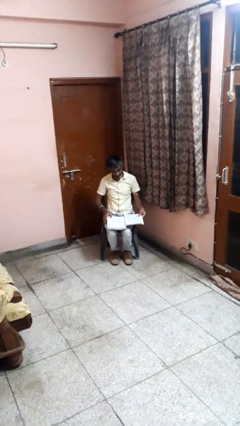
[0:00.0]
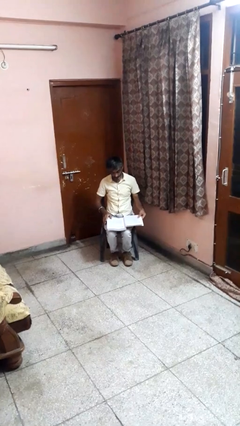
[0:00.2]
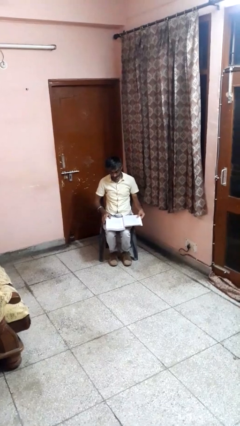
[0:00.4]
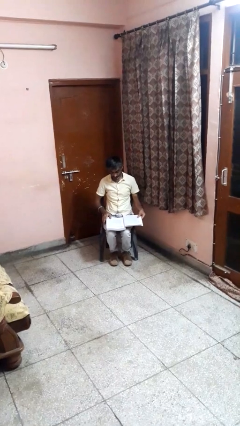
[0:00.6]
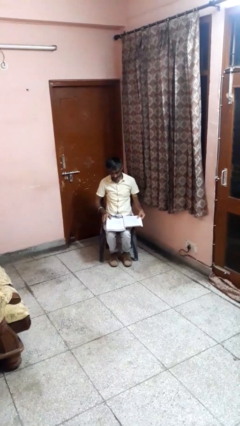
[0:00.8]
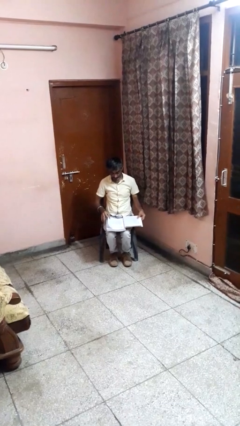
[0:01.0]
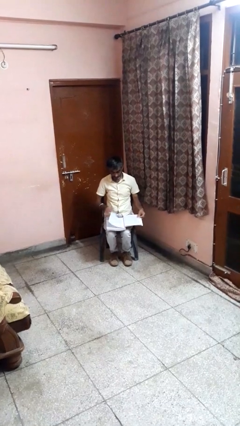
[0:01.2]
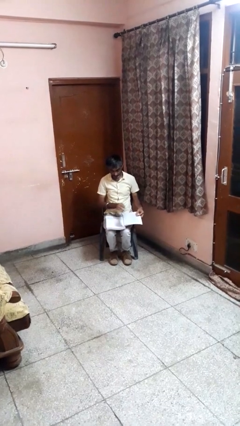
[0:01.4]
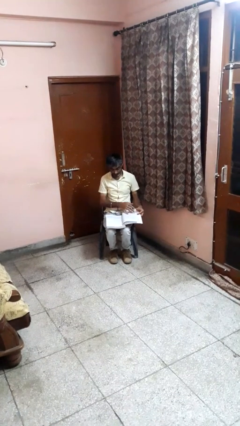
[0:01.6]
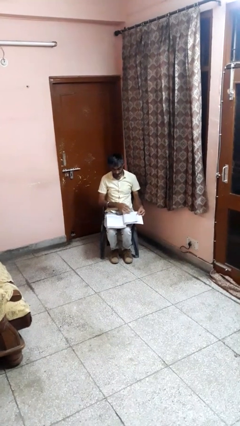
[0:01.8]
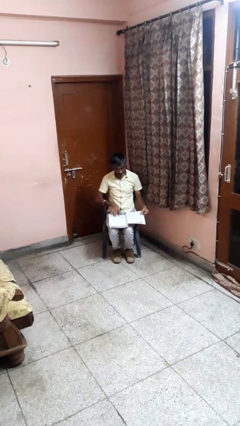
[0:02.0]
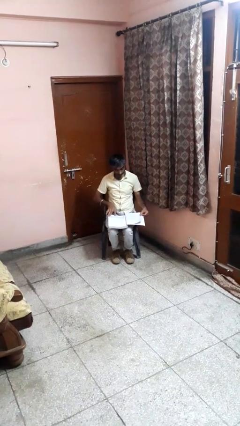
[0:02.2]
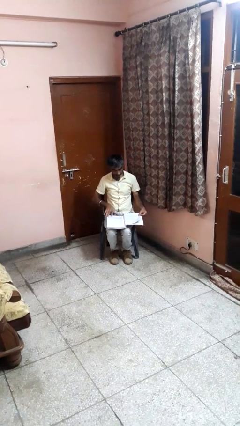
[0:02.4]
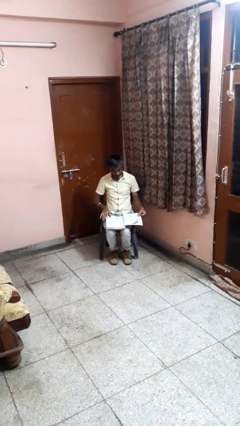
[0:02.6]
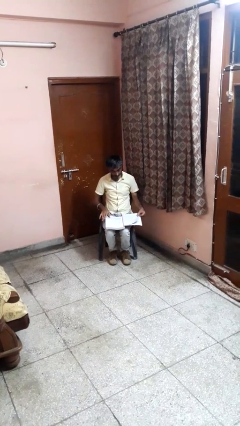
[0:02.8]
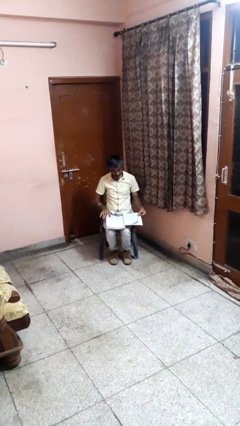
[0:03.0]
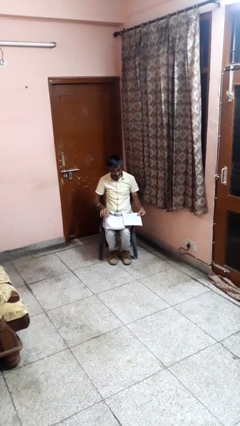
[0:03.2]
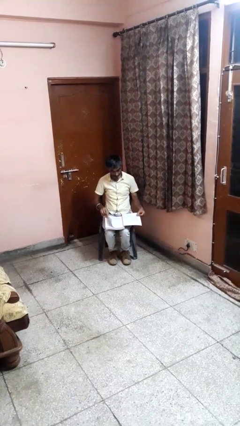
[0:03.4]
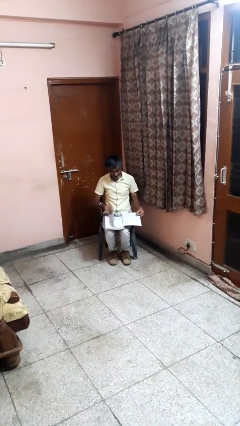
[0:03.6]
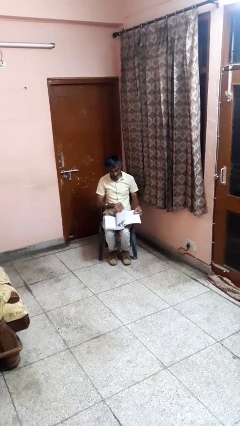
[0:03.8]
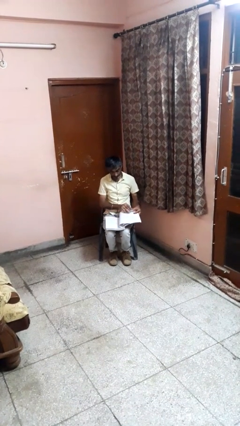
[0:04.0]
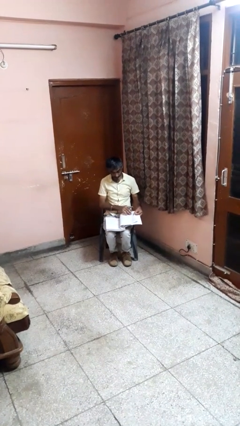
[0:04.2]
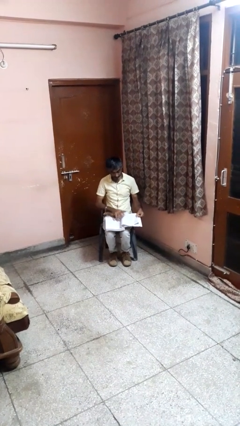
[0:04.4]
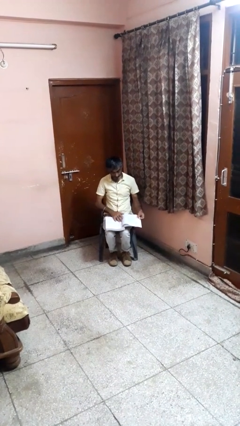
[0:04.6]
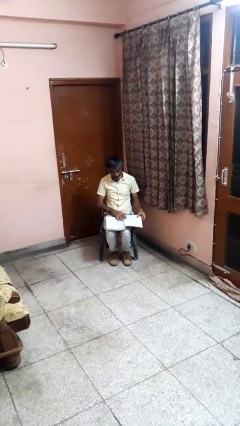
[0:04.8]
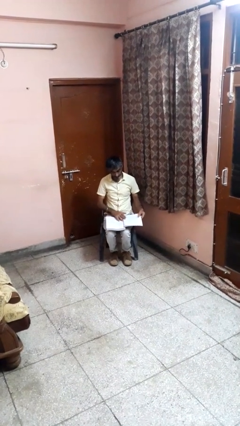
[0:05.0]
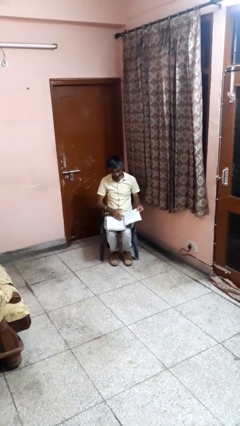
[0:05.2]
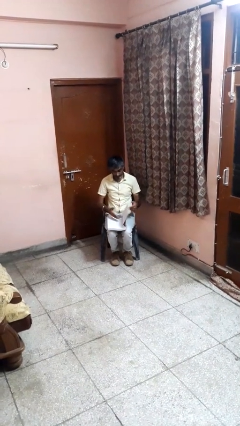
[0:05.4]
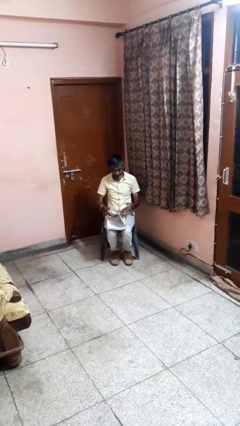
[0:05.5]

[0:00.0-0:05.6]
person reads book

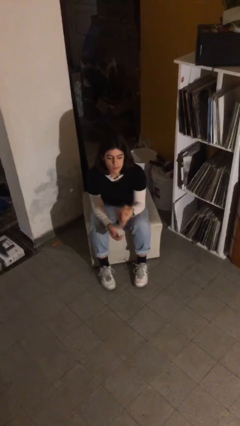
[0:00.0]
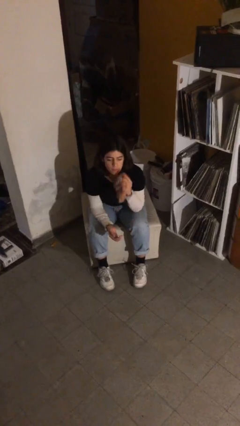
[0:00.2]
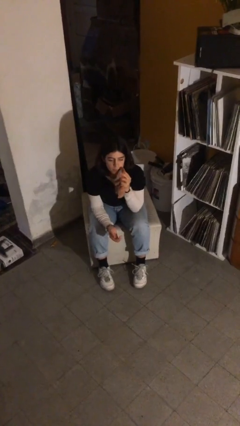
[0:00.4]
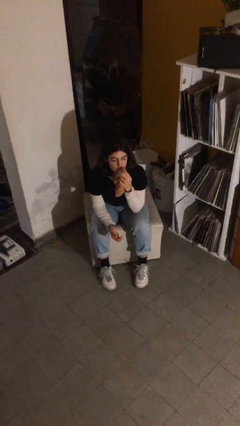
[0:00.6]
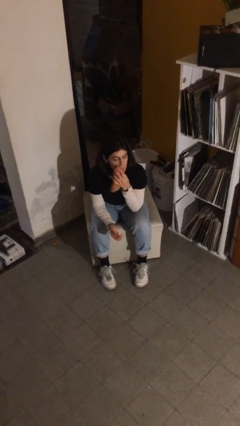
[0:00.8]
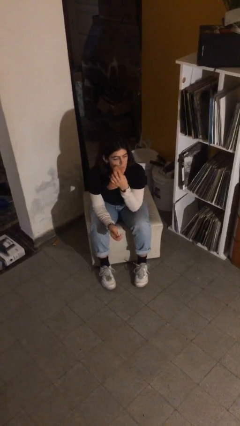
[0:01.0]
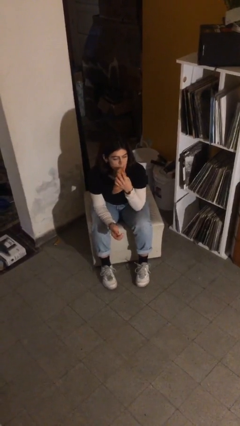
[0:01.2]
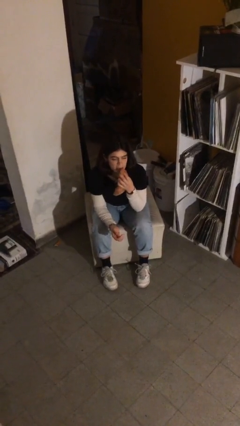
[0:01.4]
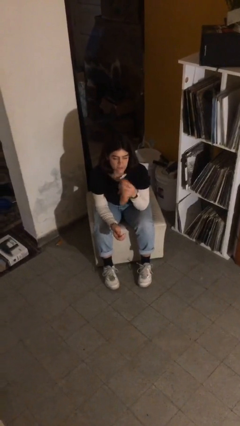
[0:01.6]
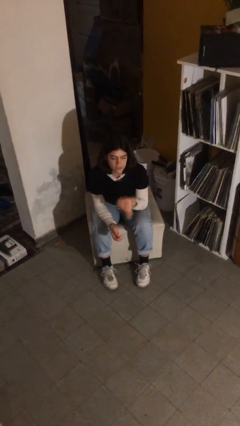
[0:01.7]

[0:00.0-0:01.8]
person wipes mouth with napkin

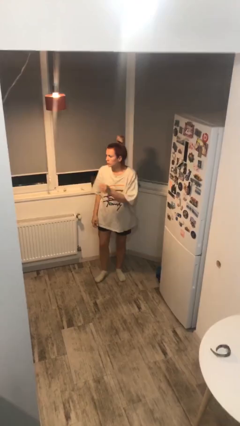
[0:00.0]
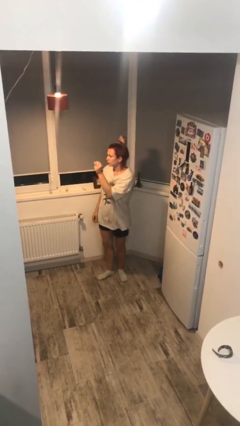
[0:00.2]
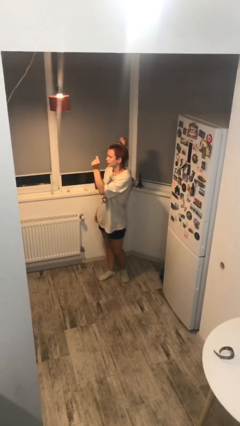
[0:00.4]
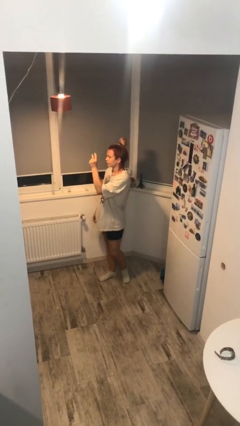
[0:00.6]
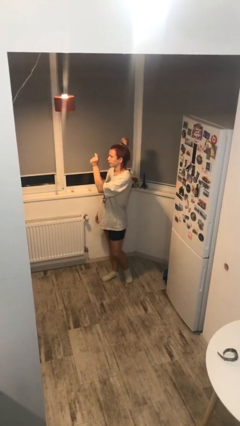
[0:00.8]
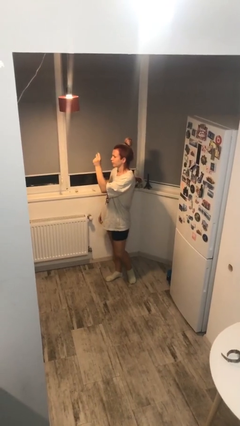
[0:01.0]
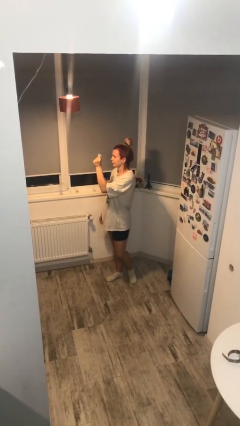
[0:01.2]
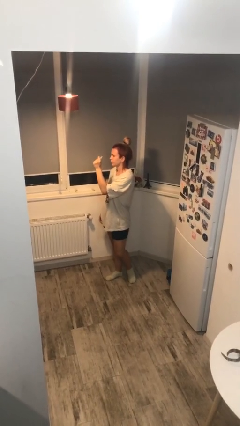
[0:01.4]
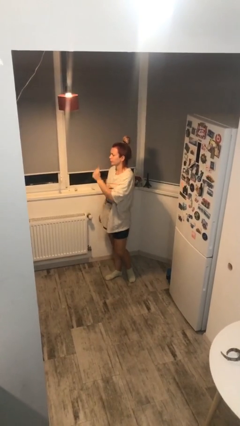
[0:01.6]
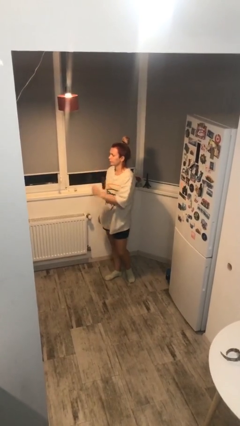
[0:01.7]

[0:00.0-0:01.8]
person snaps fingers

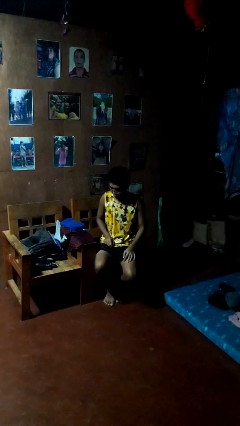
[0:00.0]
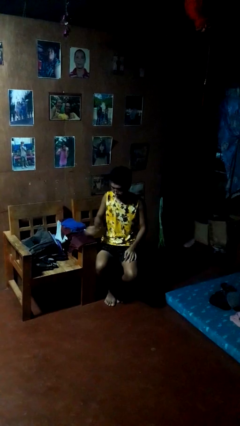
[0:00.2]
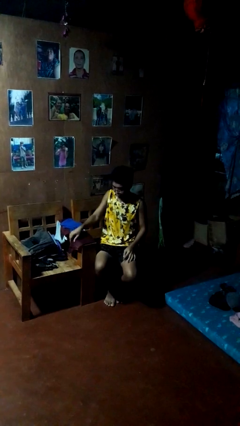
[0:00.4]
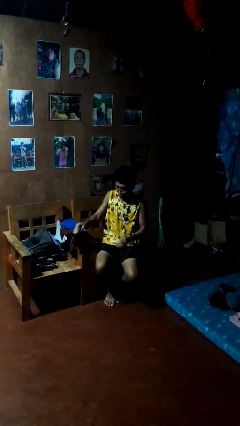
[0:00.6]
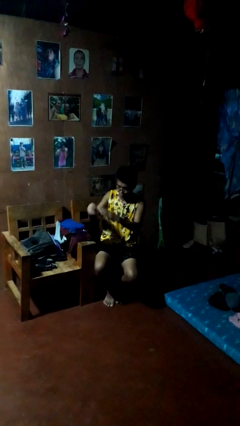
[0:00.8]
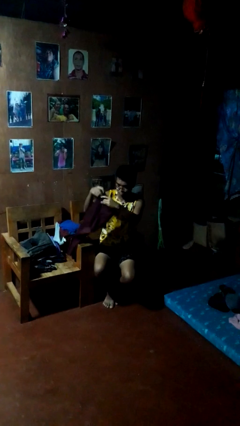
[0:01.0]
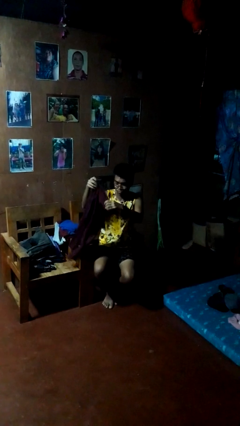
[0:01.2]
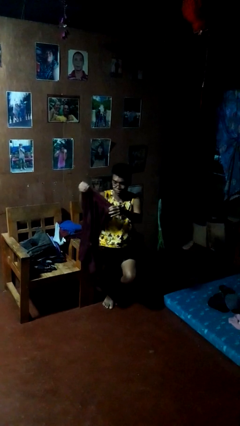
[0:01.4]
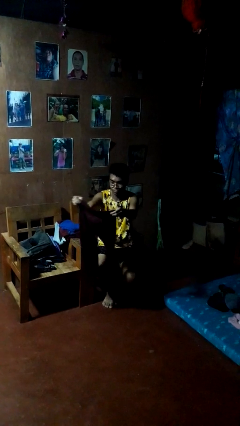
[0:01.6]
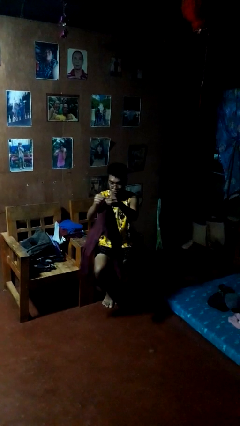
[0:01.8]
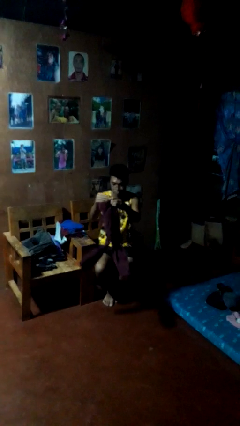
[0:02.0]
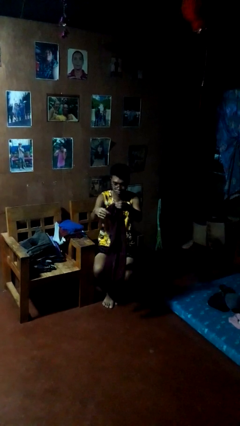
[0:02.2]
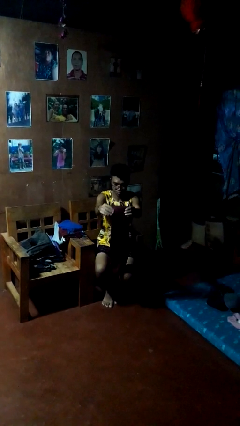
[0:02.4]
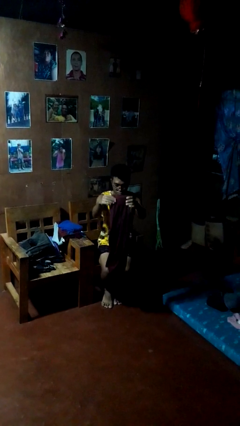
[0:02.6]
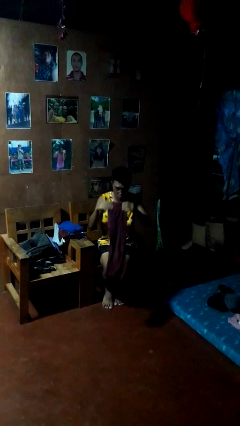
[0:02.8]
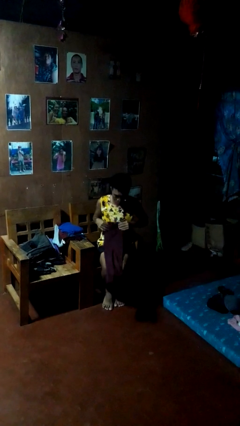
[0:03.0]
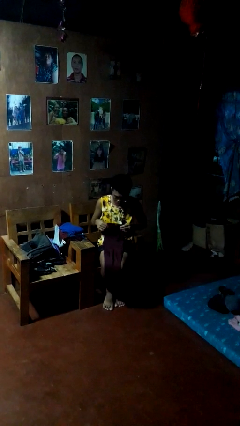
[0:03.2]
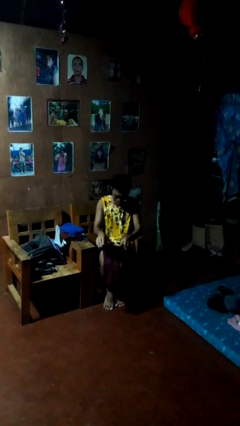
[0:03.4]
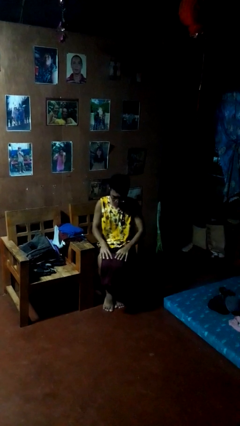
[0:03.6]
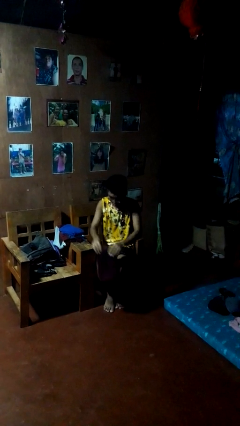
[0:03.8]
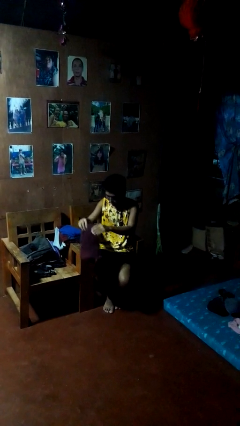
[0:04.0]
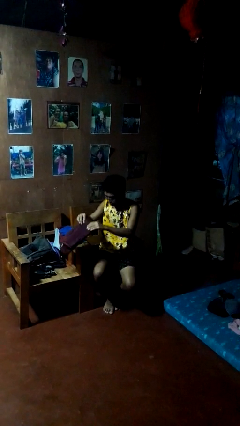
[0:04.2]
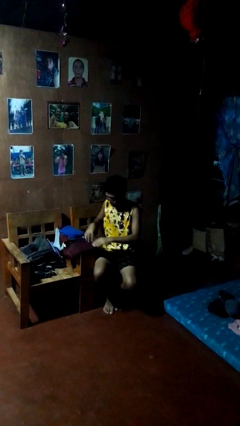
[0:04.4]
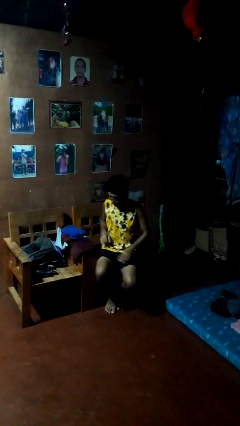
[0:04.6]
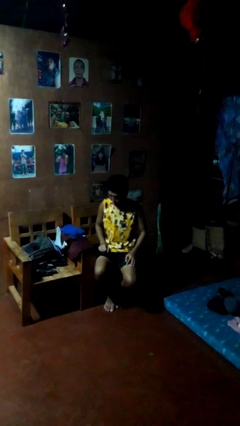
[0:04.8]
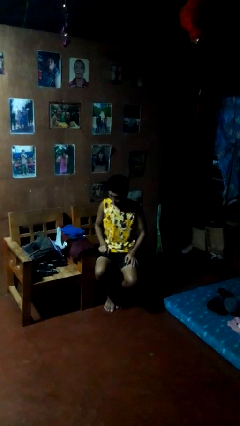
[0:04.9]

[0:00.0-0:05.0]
person folds pants

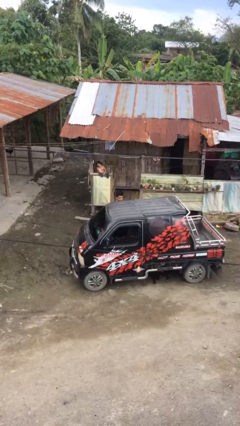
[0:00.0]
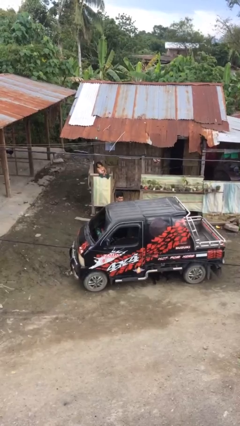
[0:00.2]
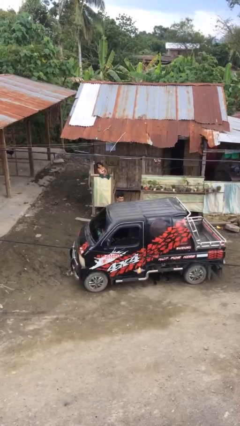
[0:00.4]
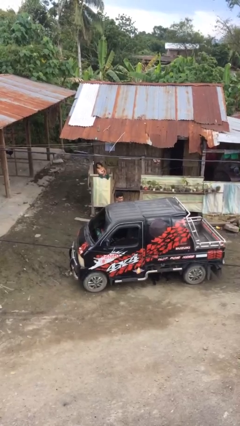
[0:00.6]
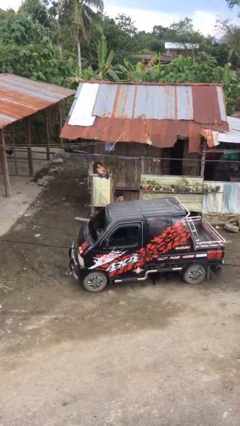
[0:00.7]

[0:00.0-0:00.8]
person closes car door

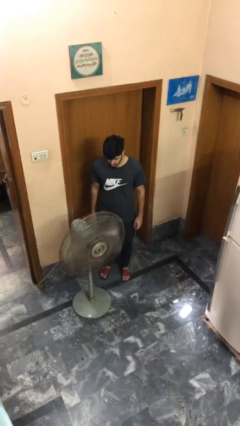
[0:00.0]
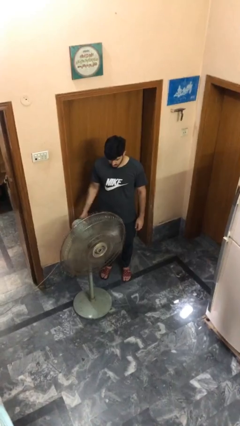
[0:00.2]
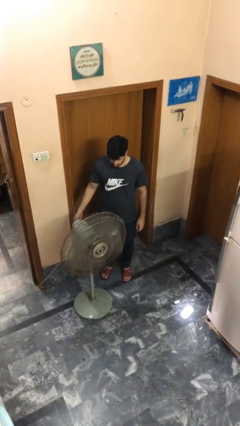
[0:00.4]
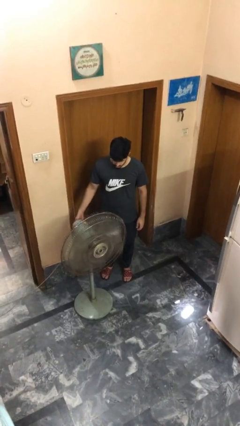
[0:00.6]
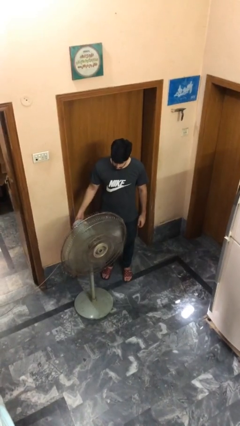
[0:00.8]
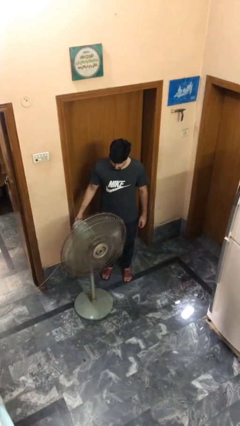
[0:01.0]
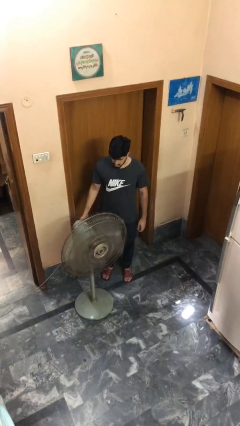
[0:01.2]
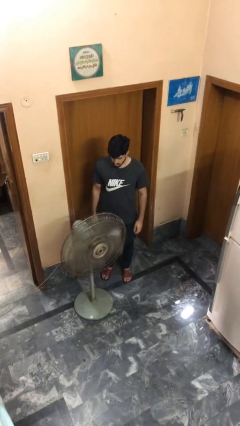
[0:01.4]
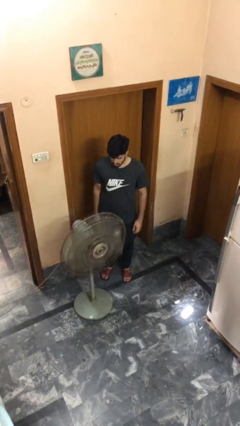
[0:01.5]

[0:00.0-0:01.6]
person turns off fan

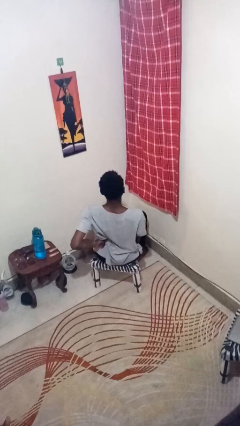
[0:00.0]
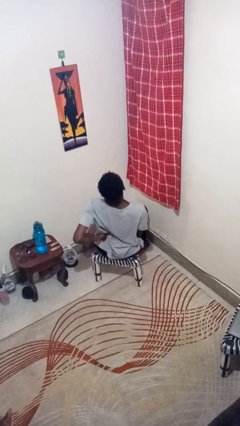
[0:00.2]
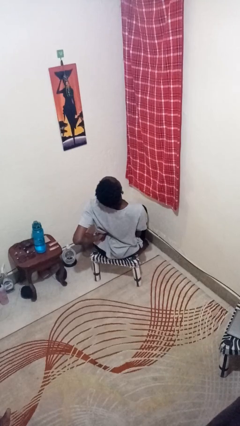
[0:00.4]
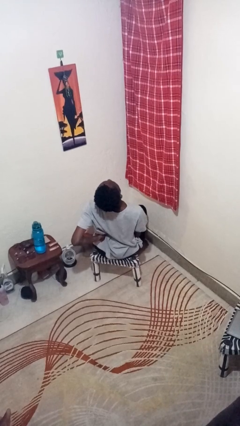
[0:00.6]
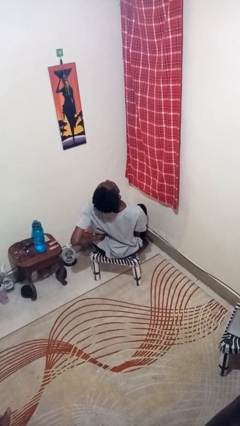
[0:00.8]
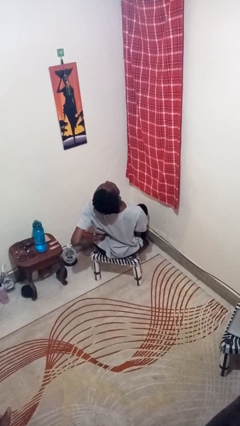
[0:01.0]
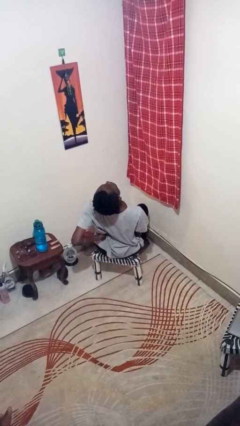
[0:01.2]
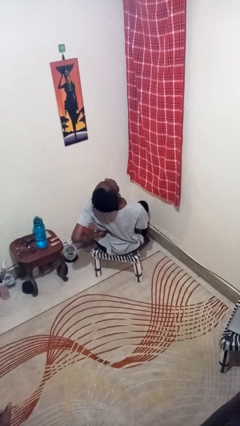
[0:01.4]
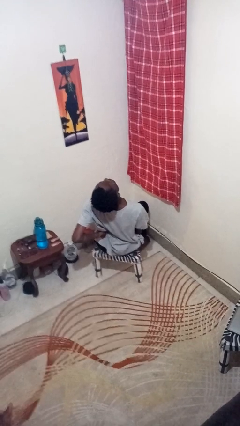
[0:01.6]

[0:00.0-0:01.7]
person stretches back
